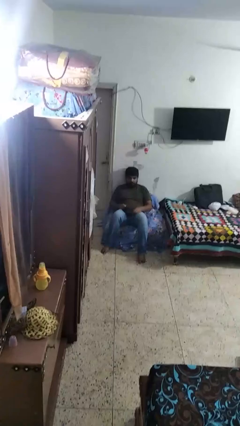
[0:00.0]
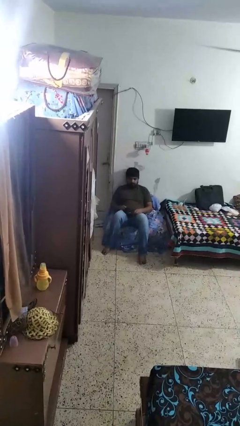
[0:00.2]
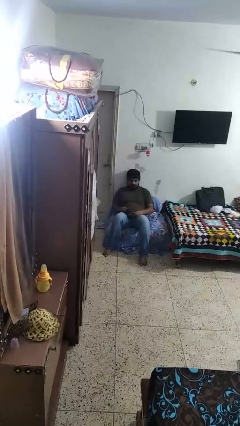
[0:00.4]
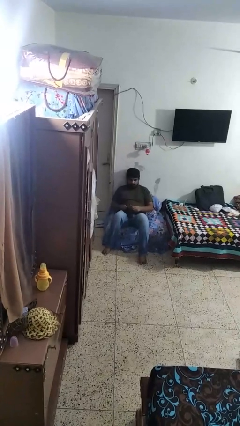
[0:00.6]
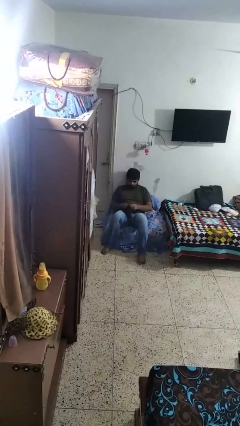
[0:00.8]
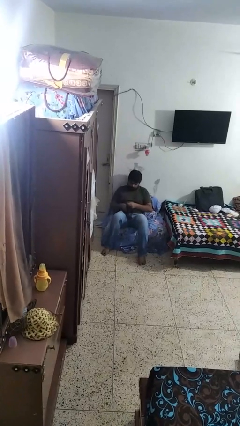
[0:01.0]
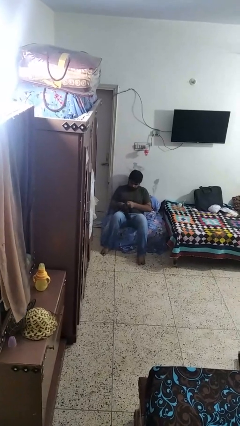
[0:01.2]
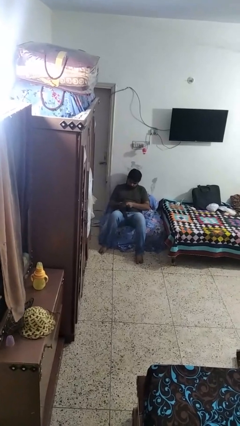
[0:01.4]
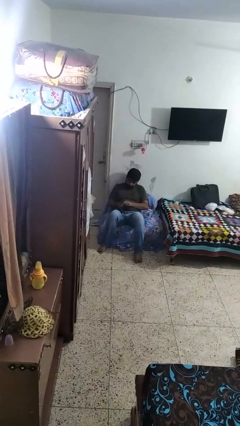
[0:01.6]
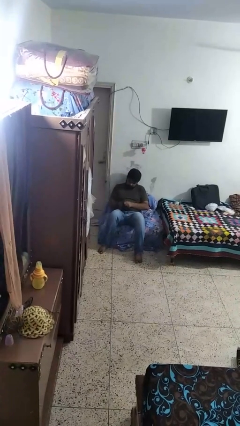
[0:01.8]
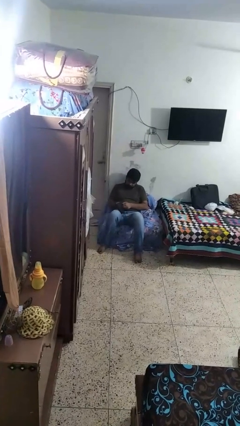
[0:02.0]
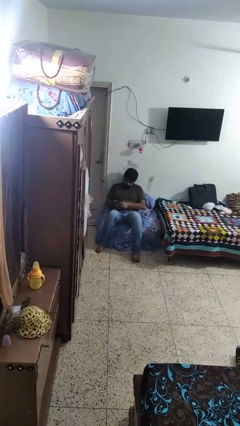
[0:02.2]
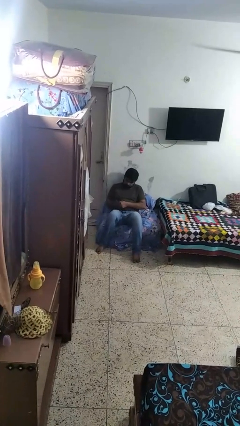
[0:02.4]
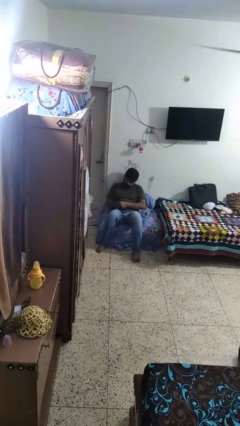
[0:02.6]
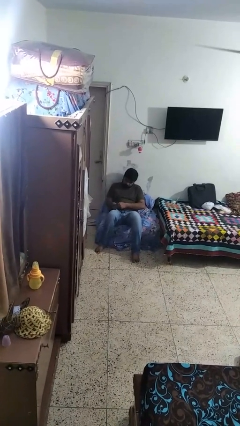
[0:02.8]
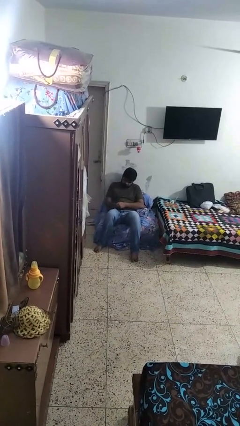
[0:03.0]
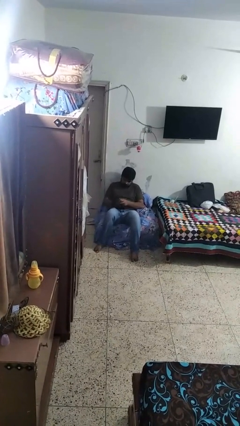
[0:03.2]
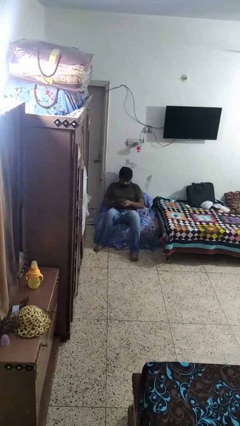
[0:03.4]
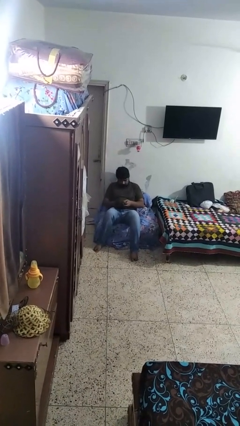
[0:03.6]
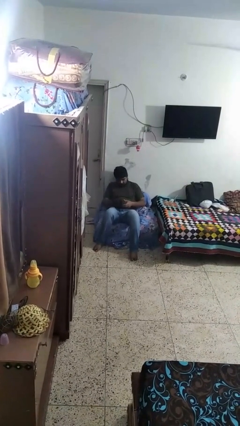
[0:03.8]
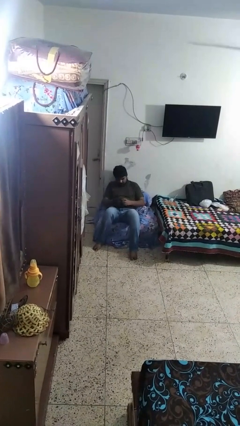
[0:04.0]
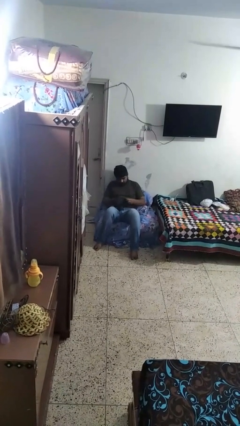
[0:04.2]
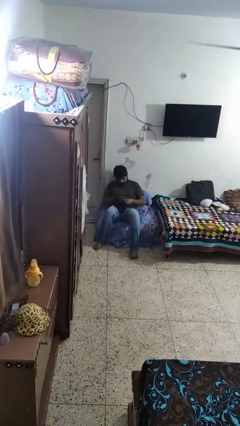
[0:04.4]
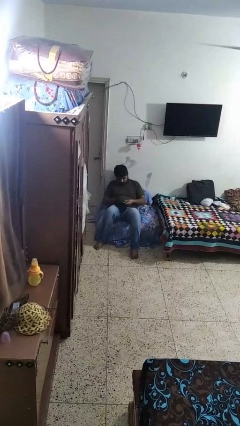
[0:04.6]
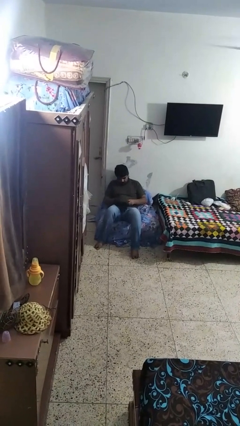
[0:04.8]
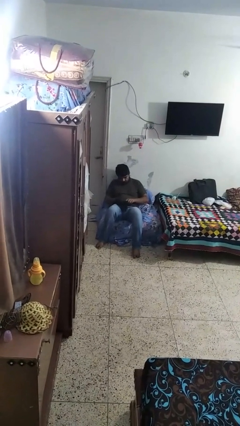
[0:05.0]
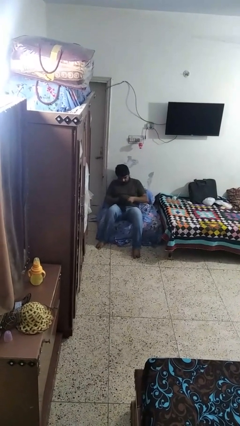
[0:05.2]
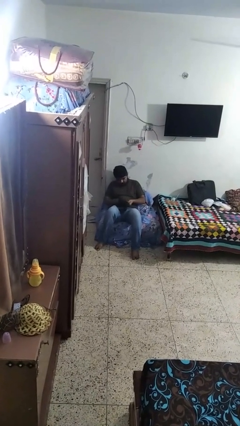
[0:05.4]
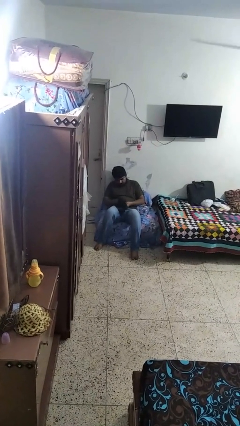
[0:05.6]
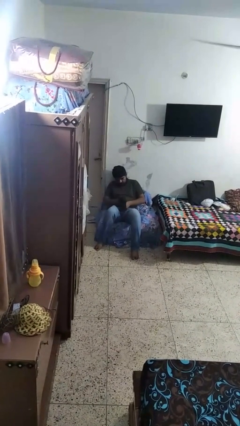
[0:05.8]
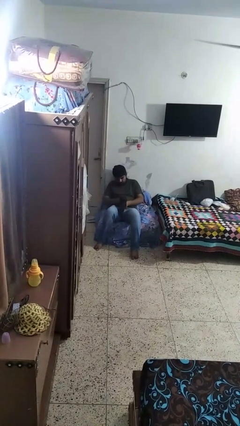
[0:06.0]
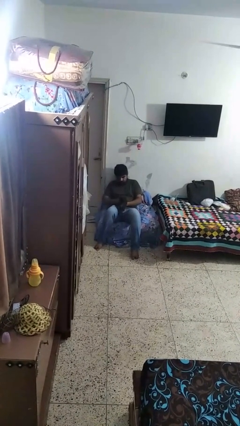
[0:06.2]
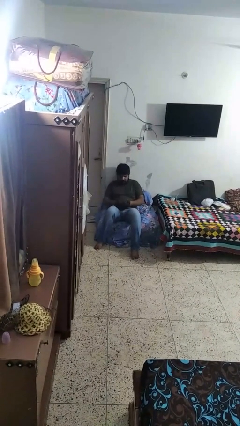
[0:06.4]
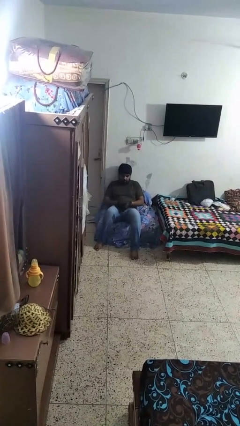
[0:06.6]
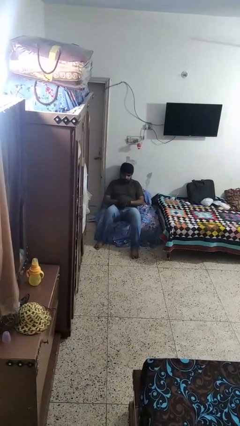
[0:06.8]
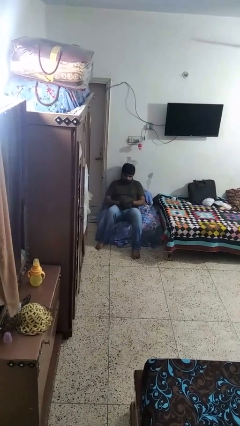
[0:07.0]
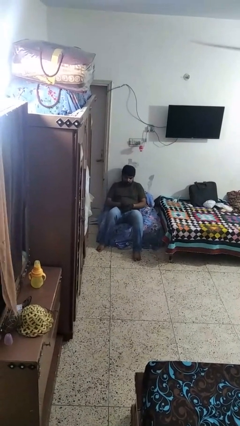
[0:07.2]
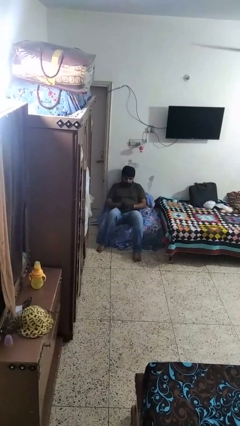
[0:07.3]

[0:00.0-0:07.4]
person puts on gloves

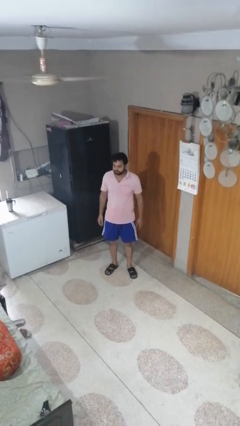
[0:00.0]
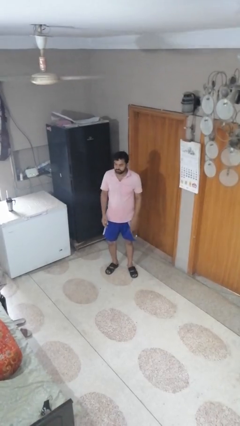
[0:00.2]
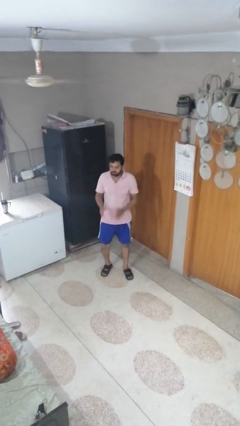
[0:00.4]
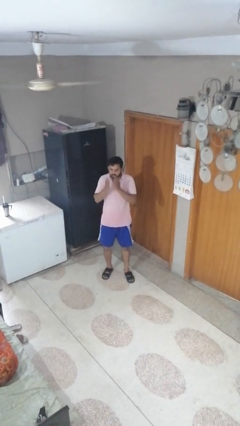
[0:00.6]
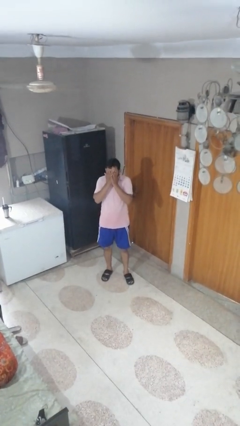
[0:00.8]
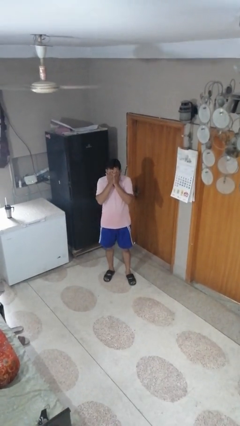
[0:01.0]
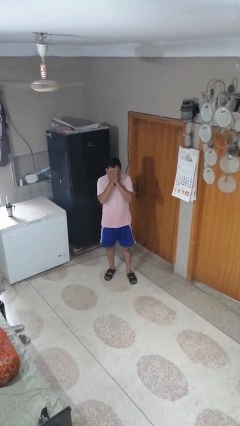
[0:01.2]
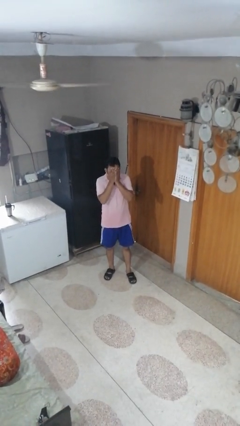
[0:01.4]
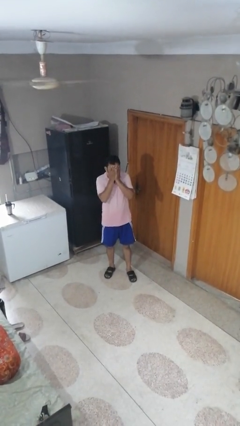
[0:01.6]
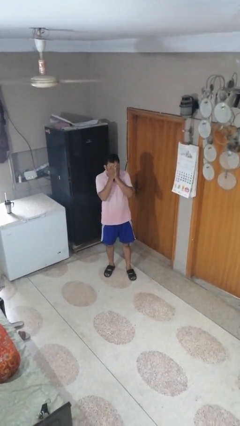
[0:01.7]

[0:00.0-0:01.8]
person covers face with hands

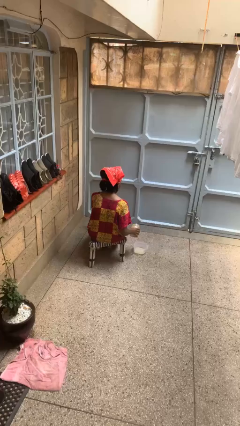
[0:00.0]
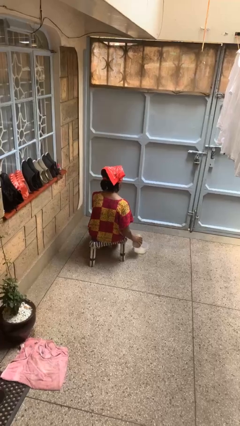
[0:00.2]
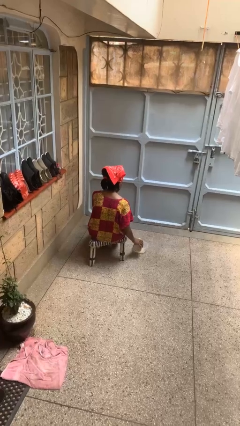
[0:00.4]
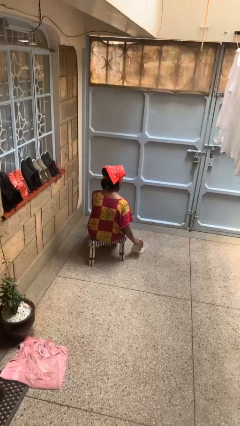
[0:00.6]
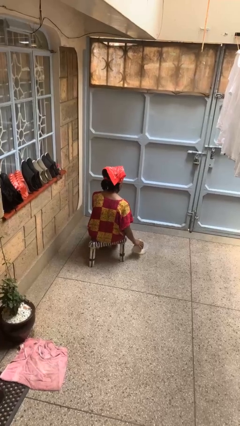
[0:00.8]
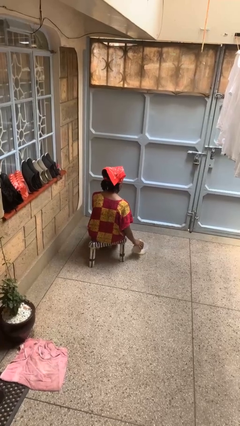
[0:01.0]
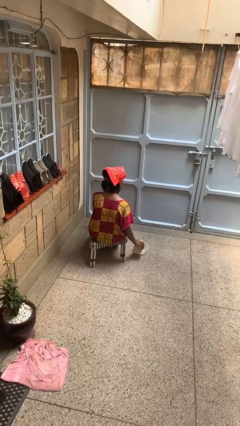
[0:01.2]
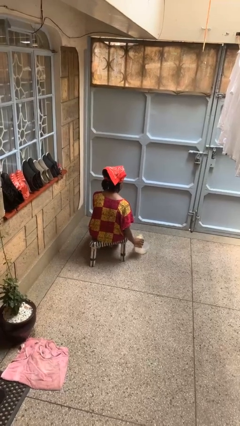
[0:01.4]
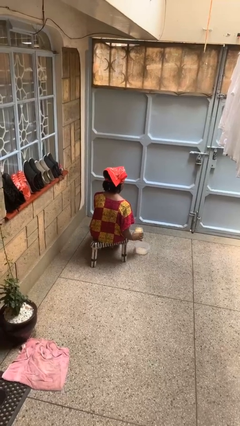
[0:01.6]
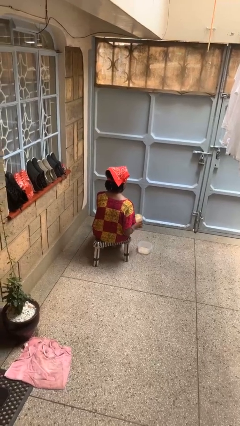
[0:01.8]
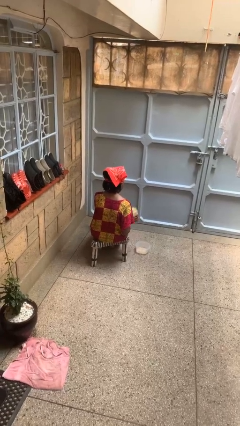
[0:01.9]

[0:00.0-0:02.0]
person pours into bowl

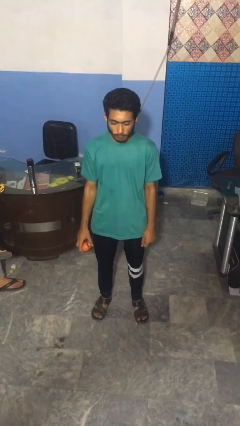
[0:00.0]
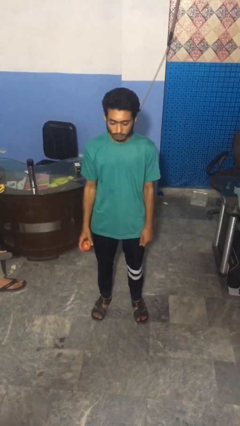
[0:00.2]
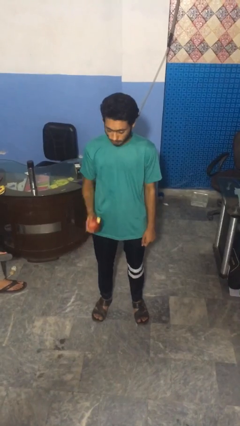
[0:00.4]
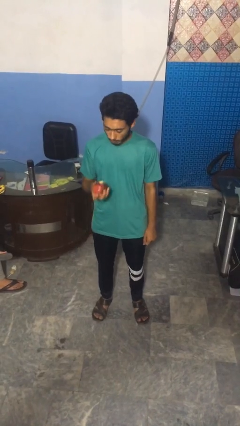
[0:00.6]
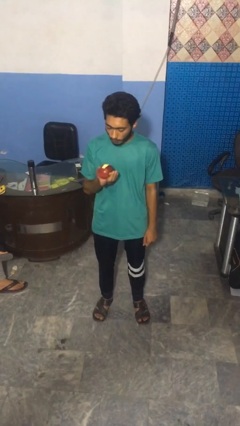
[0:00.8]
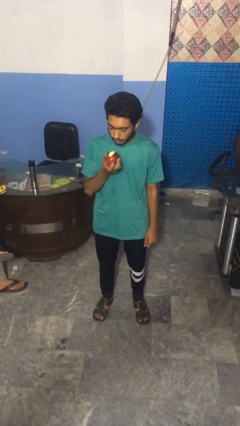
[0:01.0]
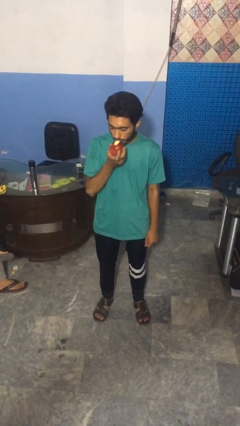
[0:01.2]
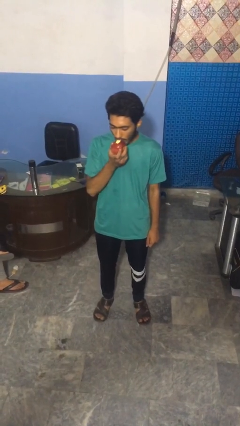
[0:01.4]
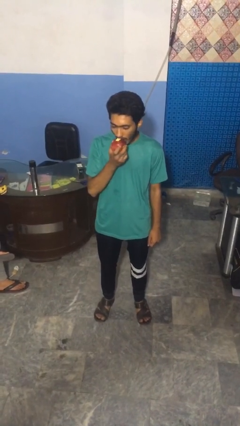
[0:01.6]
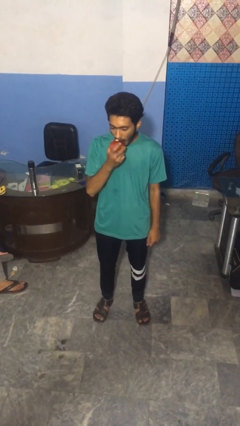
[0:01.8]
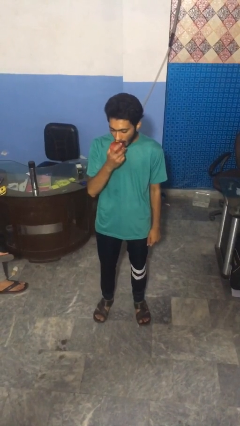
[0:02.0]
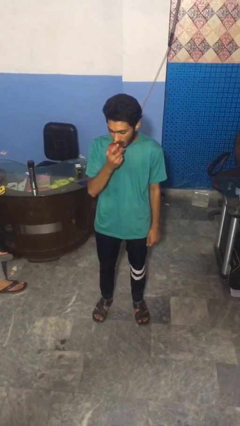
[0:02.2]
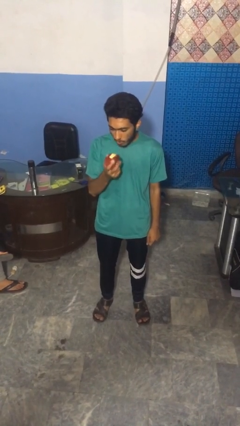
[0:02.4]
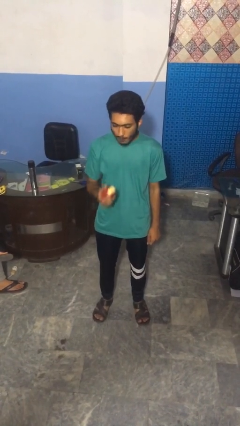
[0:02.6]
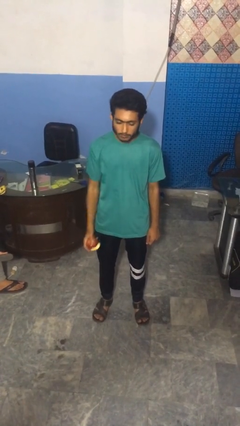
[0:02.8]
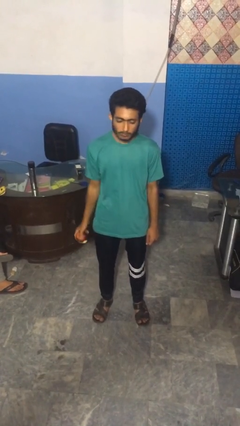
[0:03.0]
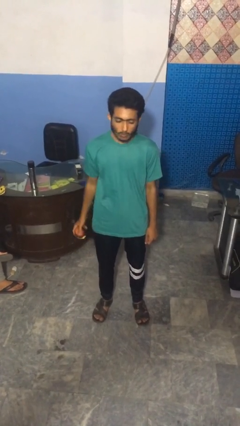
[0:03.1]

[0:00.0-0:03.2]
person eats apple

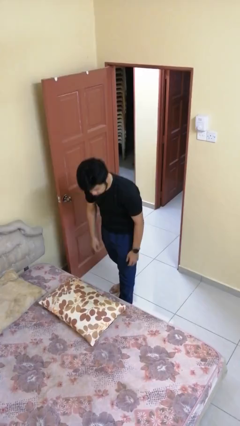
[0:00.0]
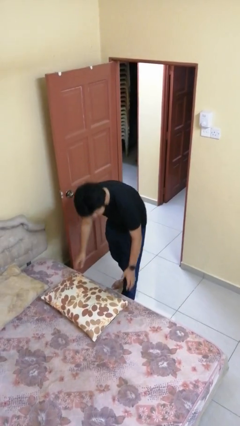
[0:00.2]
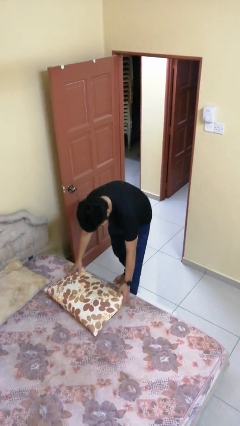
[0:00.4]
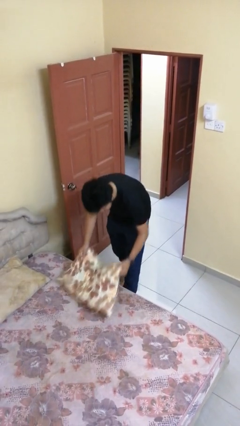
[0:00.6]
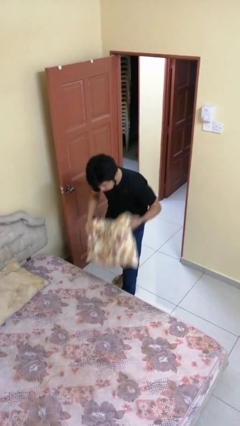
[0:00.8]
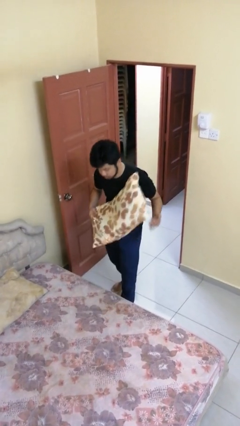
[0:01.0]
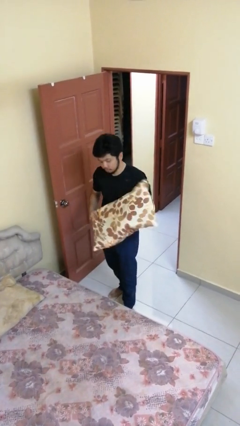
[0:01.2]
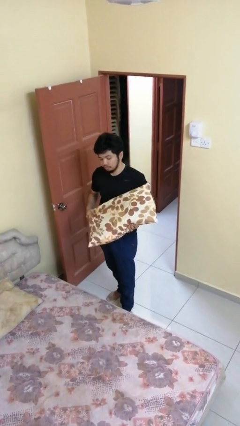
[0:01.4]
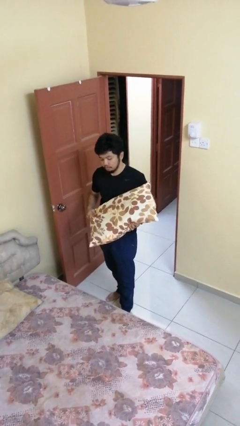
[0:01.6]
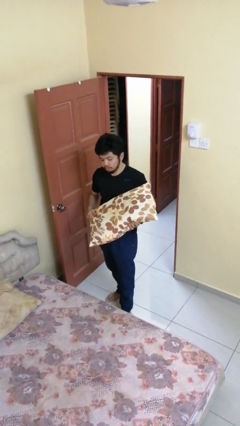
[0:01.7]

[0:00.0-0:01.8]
person picks up object from bed

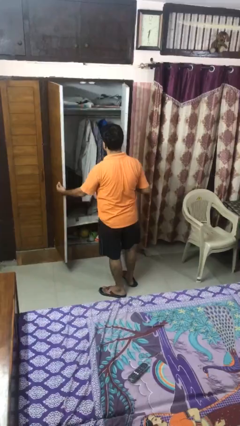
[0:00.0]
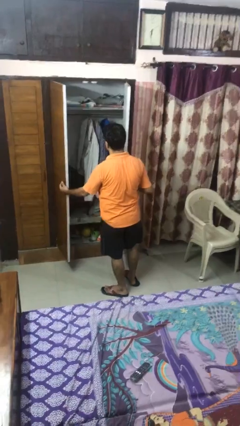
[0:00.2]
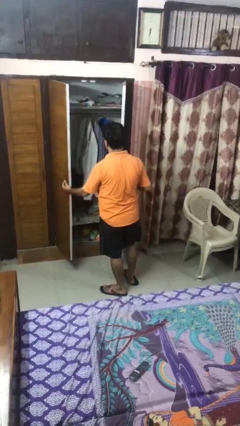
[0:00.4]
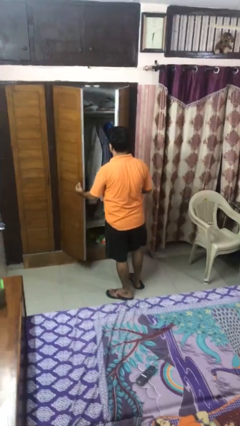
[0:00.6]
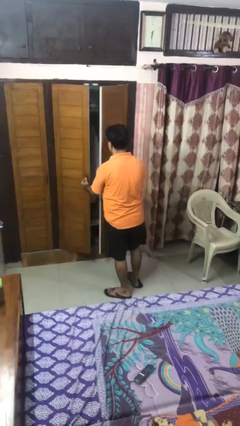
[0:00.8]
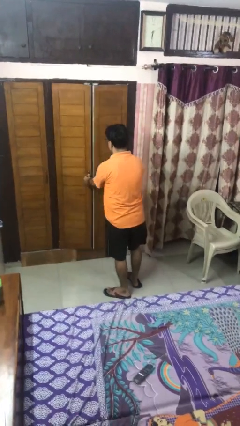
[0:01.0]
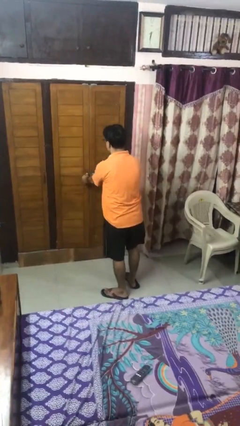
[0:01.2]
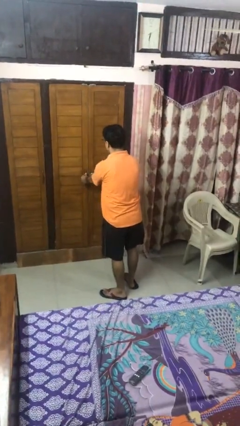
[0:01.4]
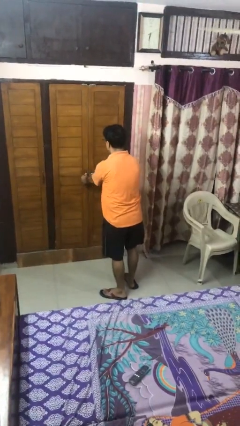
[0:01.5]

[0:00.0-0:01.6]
person closes closet door
